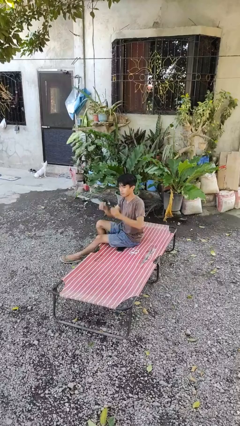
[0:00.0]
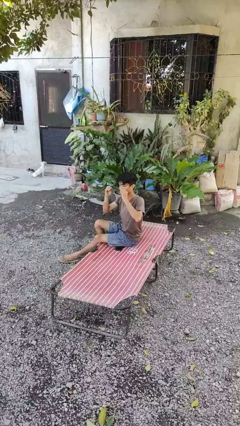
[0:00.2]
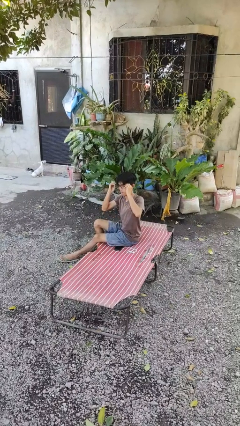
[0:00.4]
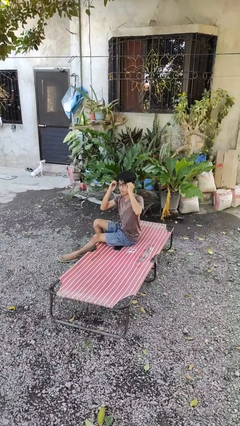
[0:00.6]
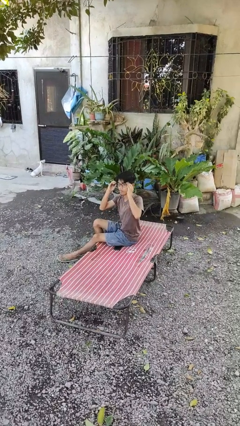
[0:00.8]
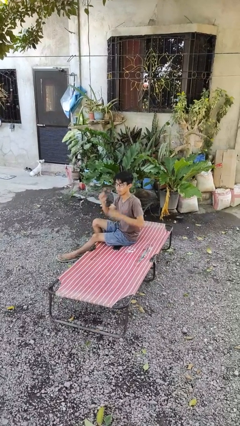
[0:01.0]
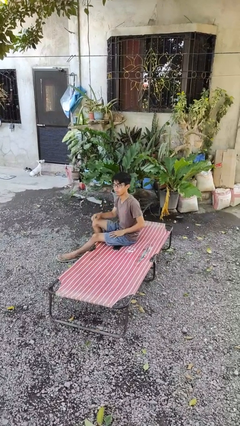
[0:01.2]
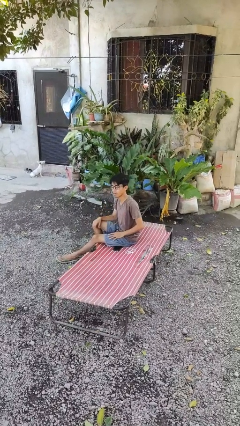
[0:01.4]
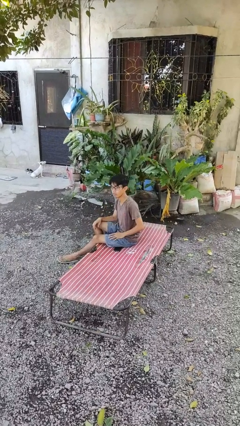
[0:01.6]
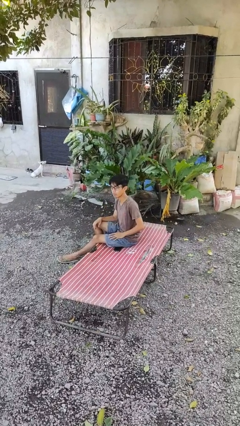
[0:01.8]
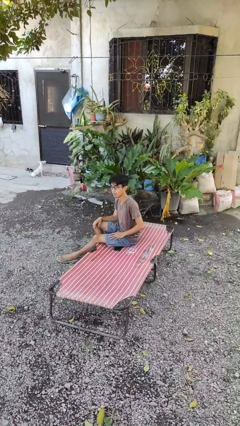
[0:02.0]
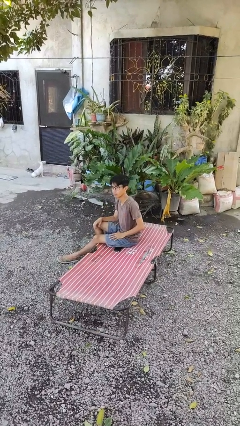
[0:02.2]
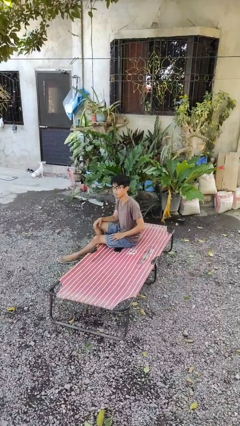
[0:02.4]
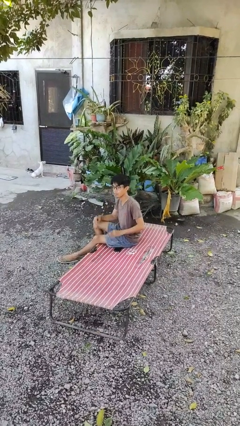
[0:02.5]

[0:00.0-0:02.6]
person puts on glasses

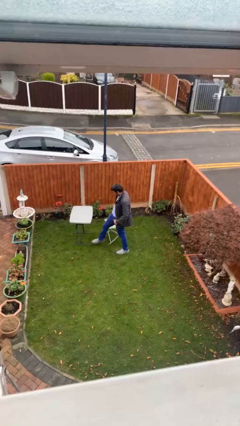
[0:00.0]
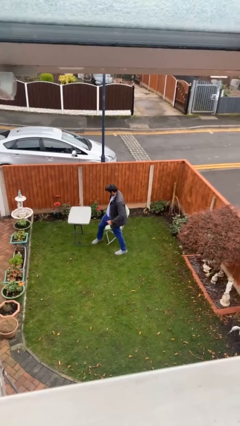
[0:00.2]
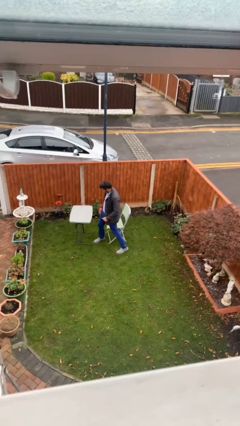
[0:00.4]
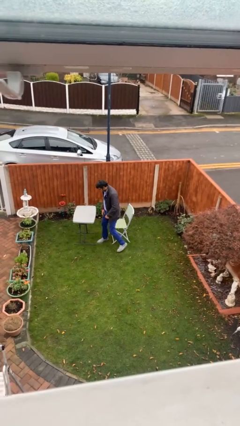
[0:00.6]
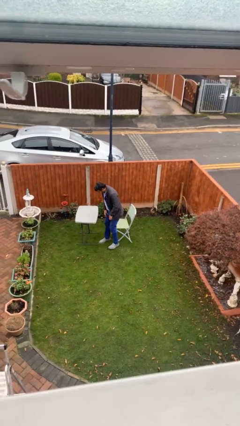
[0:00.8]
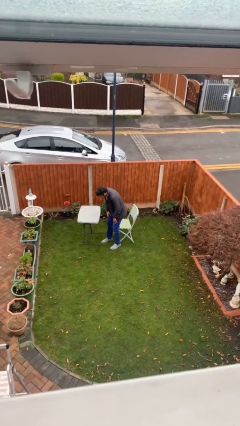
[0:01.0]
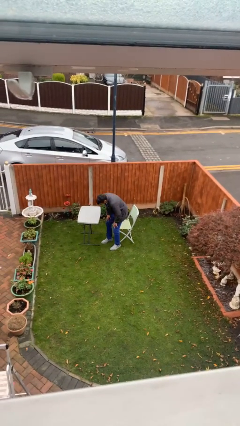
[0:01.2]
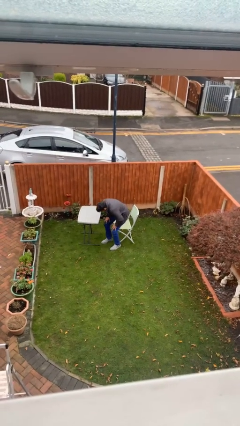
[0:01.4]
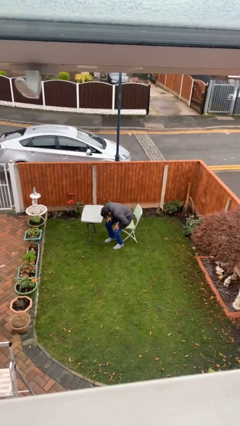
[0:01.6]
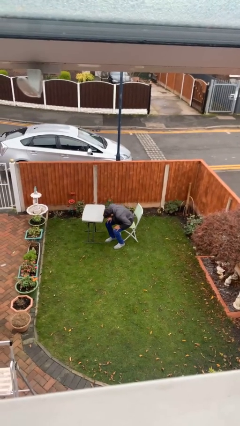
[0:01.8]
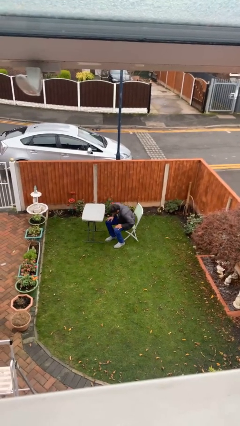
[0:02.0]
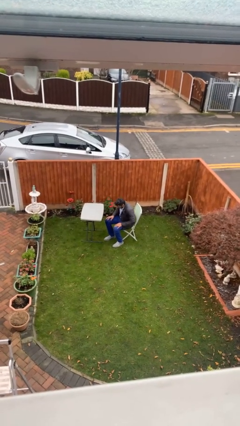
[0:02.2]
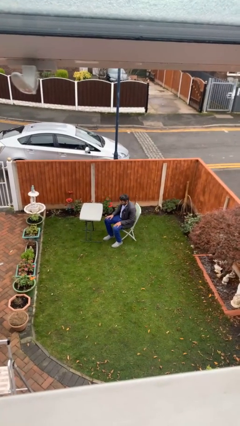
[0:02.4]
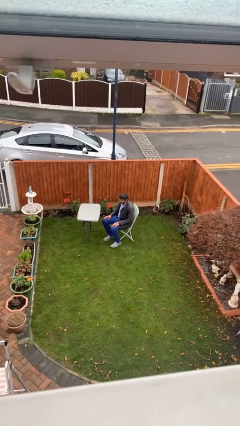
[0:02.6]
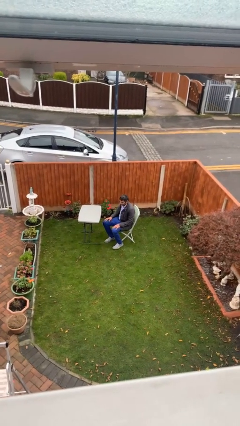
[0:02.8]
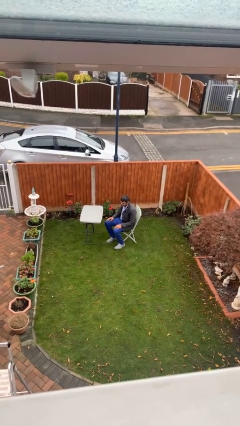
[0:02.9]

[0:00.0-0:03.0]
person sits down

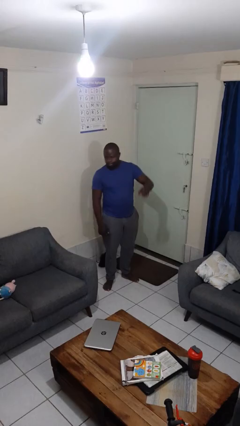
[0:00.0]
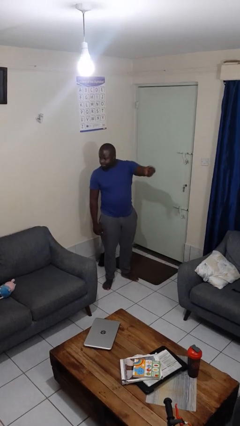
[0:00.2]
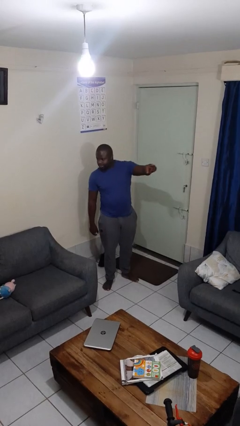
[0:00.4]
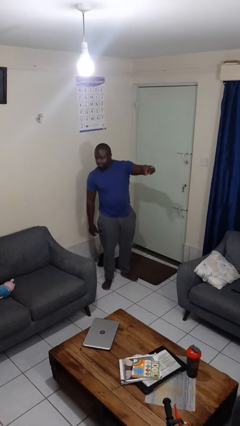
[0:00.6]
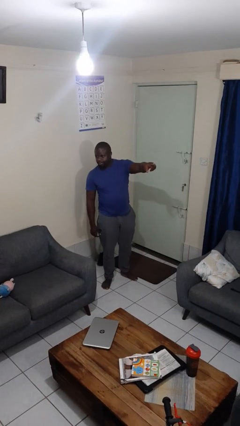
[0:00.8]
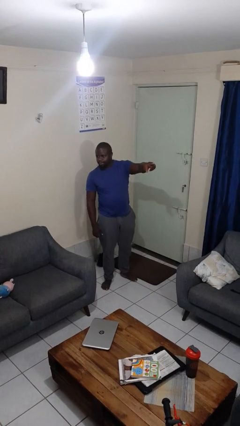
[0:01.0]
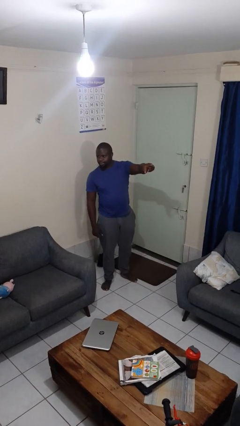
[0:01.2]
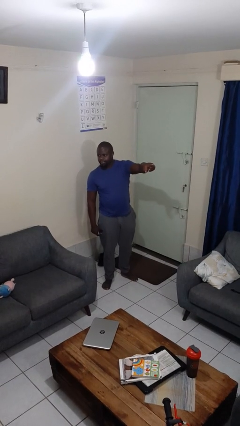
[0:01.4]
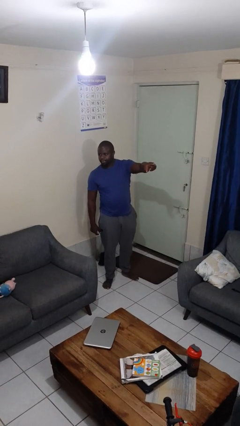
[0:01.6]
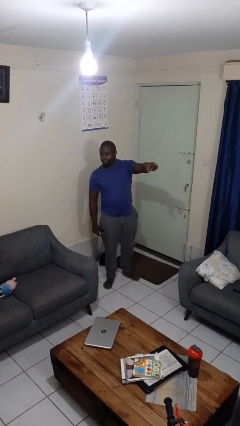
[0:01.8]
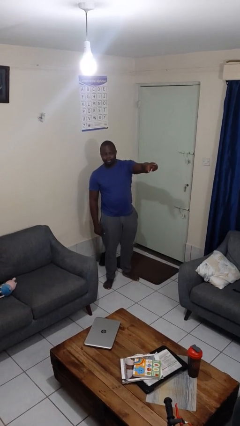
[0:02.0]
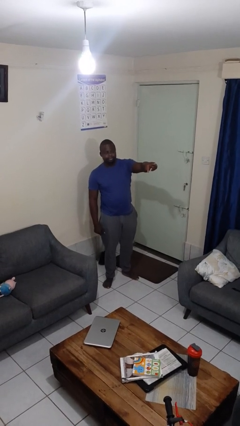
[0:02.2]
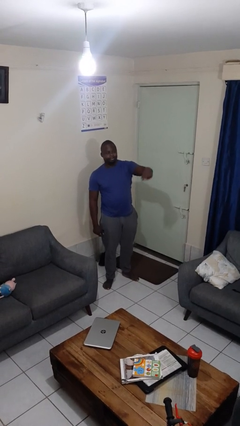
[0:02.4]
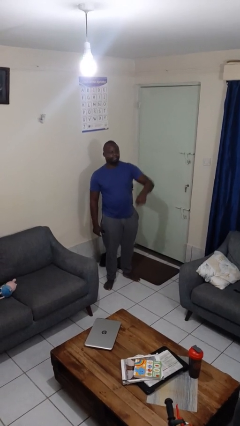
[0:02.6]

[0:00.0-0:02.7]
person points at person

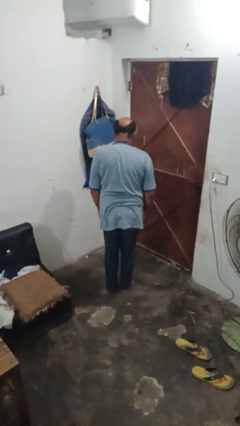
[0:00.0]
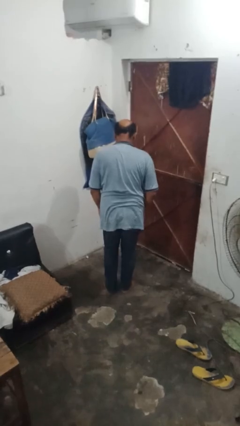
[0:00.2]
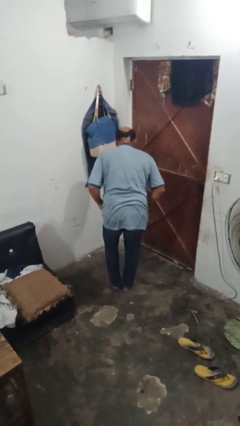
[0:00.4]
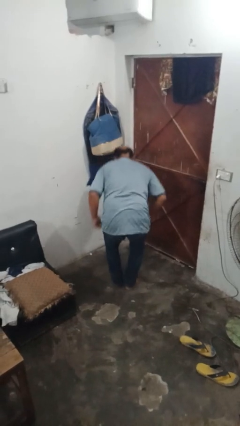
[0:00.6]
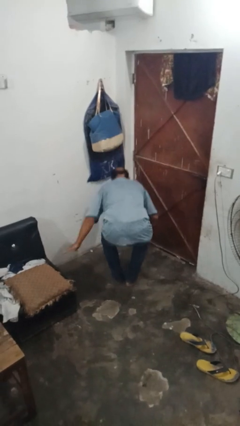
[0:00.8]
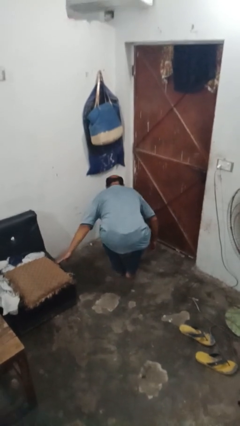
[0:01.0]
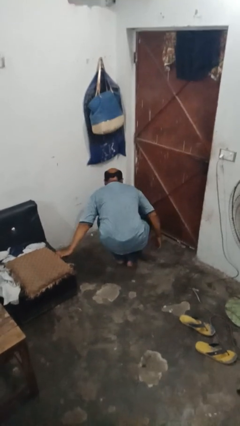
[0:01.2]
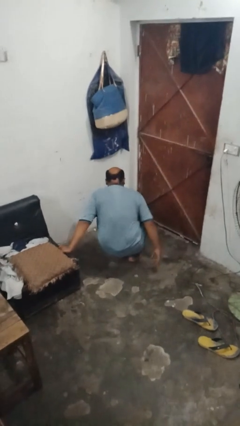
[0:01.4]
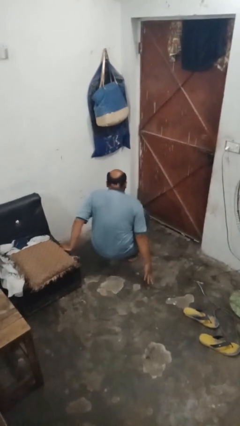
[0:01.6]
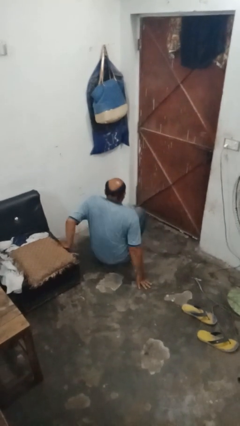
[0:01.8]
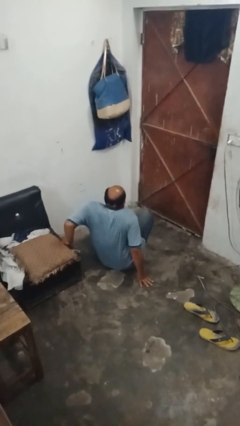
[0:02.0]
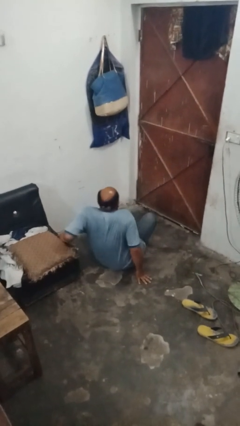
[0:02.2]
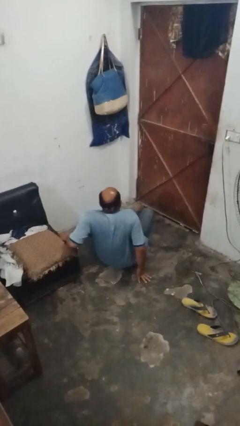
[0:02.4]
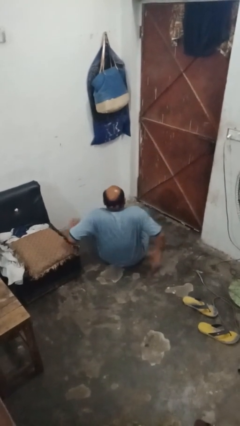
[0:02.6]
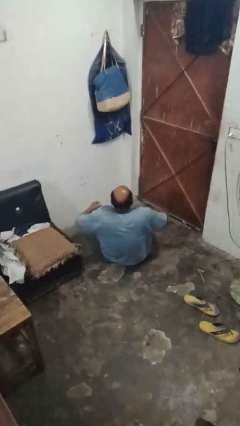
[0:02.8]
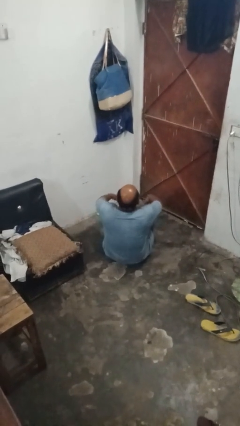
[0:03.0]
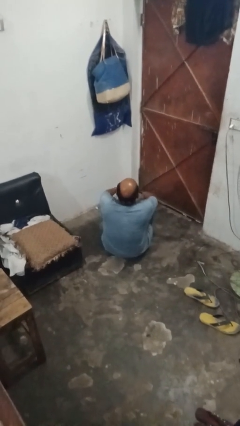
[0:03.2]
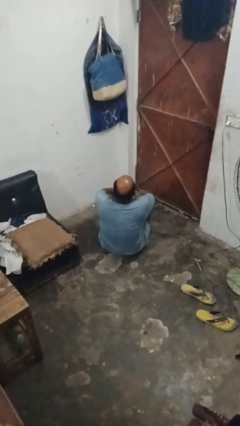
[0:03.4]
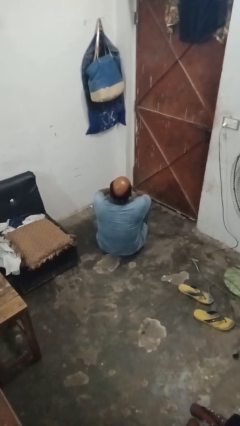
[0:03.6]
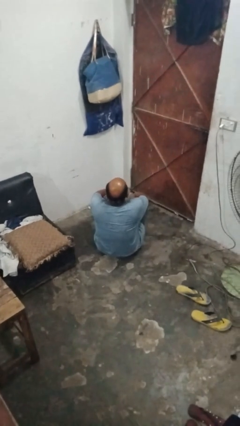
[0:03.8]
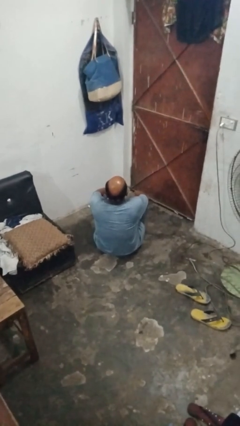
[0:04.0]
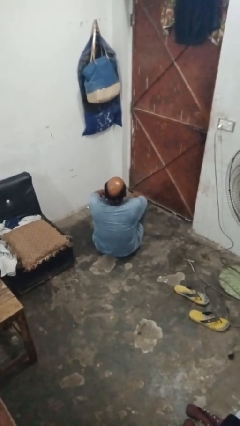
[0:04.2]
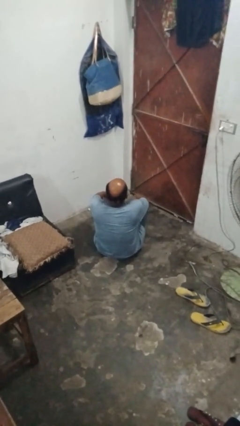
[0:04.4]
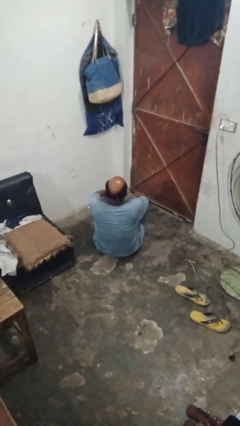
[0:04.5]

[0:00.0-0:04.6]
person sits crisscross

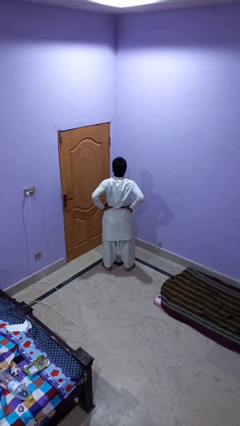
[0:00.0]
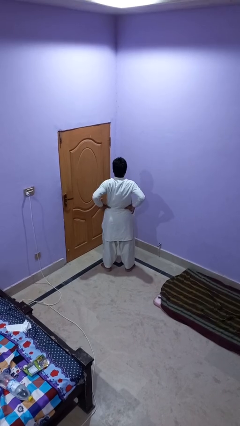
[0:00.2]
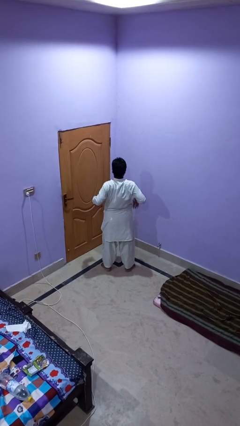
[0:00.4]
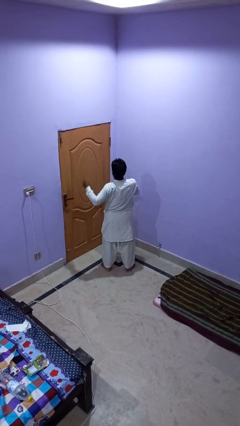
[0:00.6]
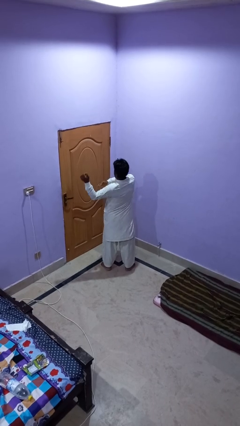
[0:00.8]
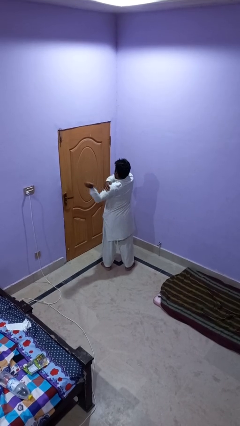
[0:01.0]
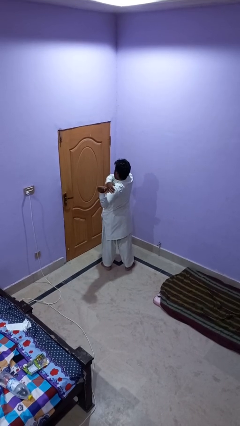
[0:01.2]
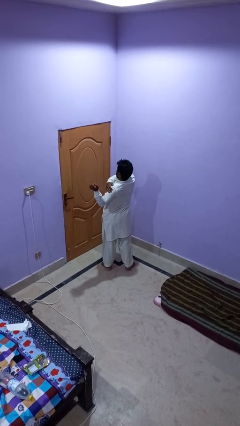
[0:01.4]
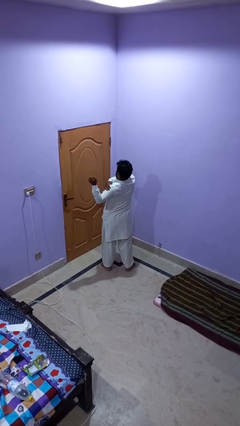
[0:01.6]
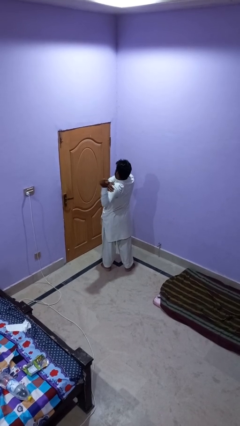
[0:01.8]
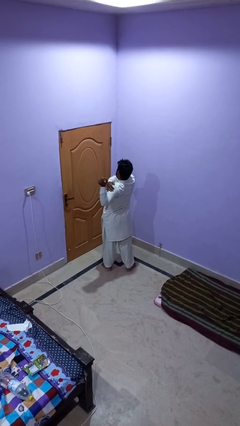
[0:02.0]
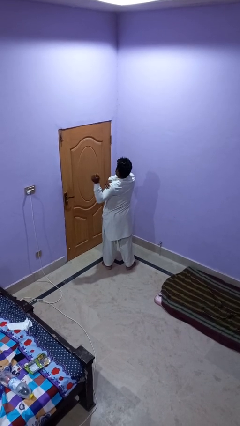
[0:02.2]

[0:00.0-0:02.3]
person stretches arms to side

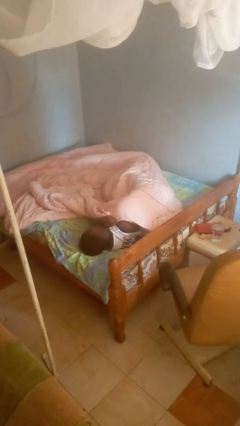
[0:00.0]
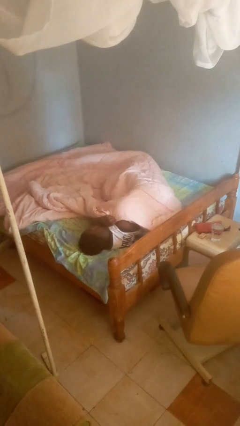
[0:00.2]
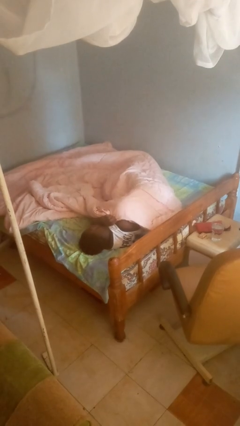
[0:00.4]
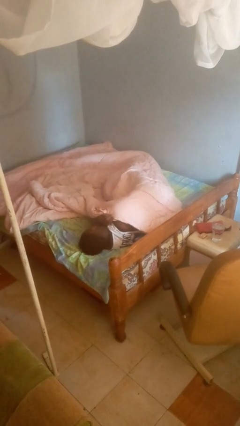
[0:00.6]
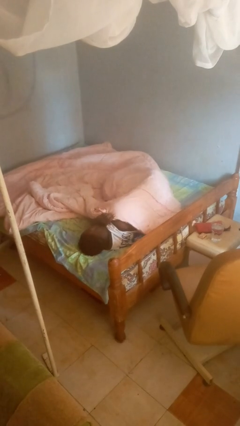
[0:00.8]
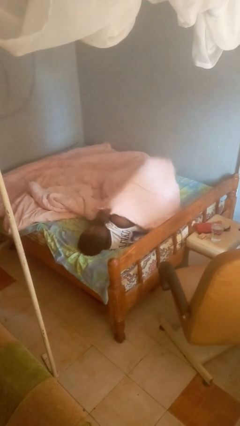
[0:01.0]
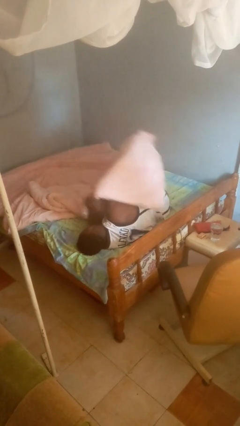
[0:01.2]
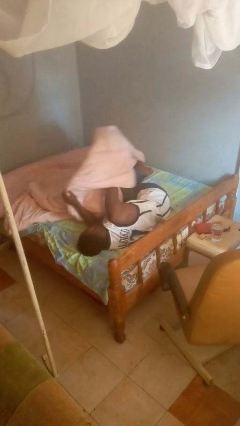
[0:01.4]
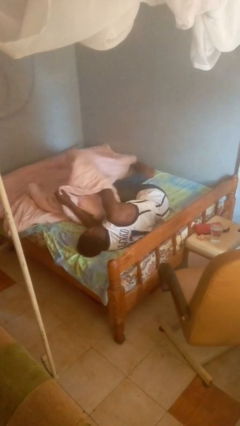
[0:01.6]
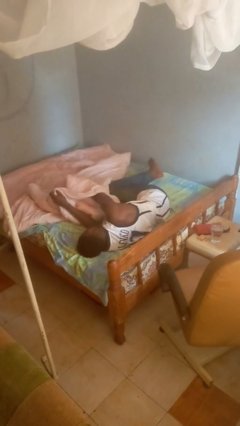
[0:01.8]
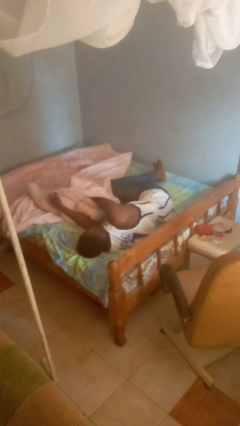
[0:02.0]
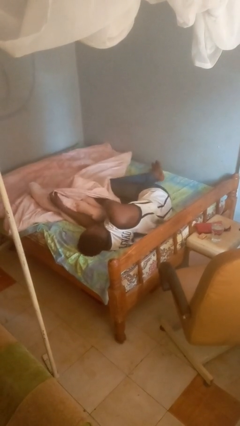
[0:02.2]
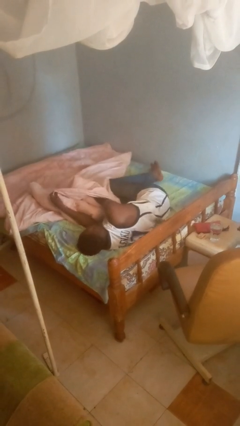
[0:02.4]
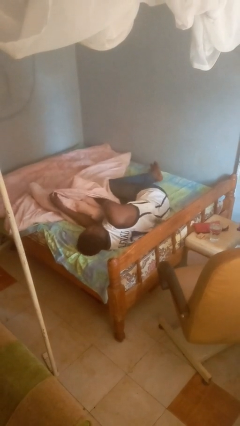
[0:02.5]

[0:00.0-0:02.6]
person uncovers with blanket
